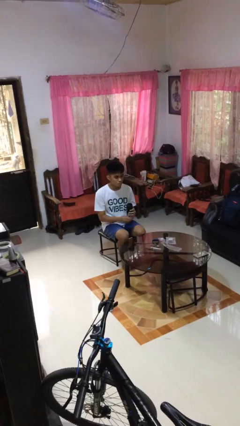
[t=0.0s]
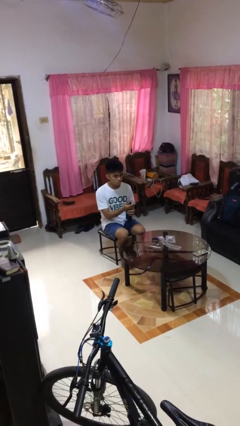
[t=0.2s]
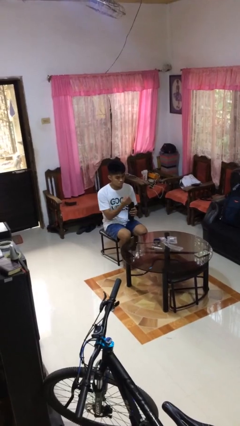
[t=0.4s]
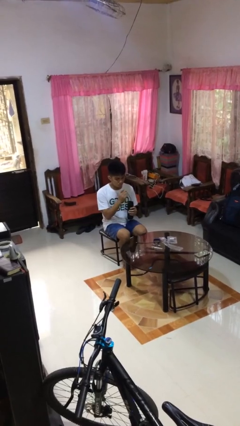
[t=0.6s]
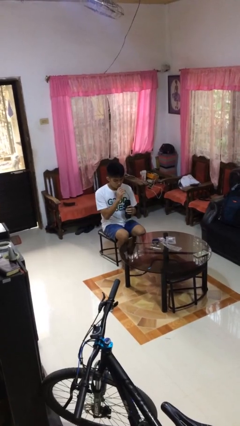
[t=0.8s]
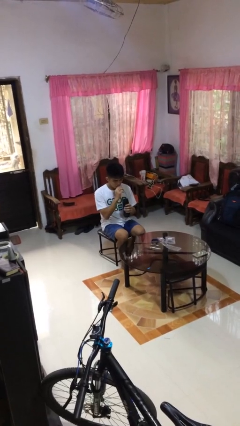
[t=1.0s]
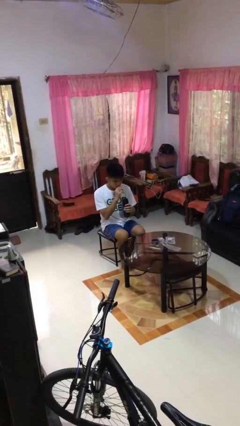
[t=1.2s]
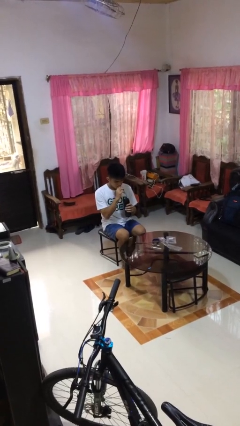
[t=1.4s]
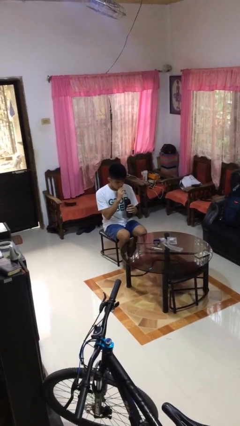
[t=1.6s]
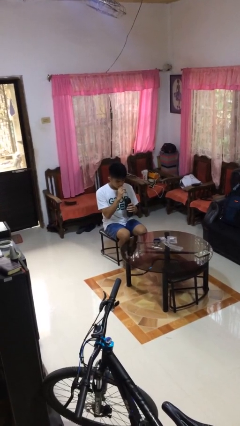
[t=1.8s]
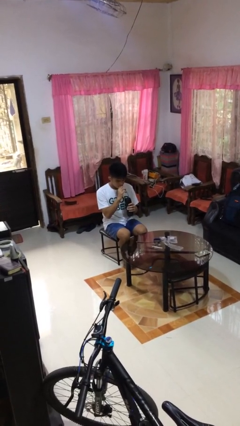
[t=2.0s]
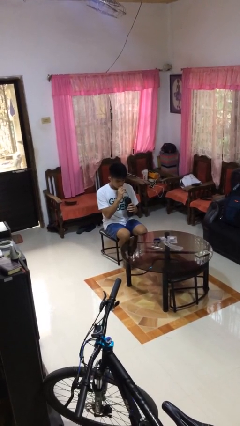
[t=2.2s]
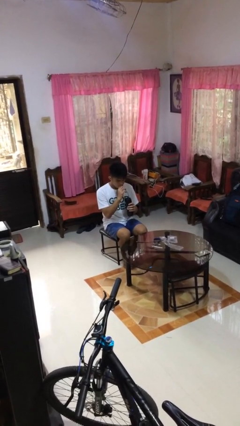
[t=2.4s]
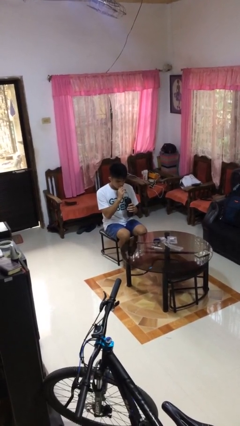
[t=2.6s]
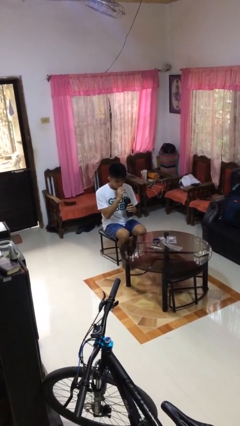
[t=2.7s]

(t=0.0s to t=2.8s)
person drinks from straw

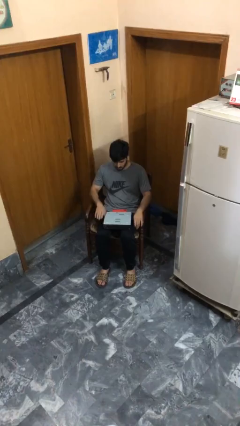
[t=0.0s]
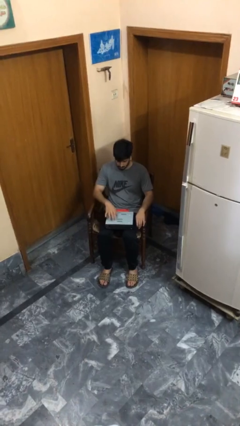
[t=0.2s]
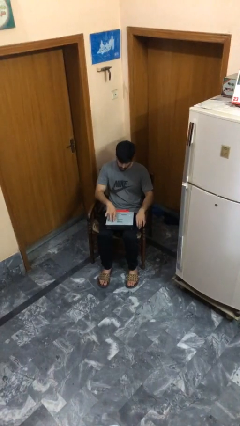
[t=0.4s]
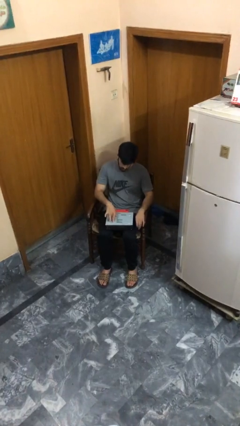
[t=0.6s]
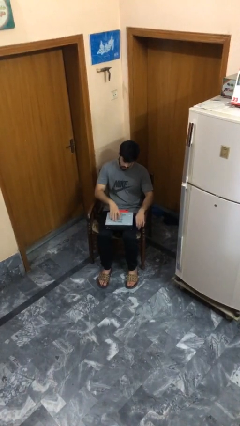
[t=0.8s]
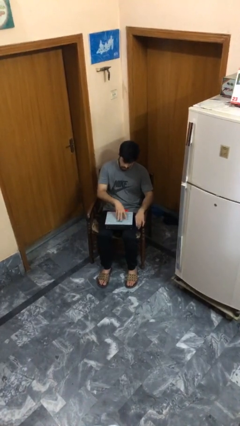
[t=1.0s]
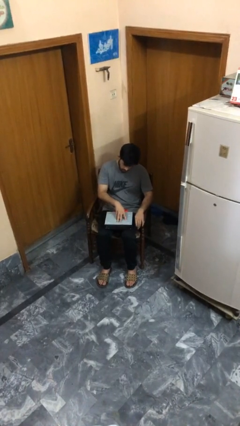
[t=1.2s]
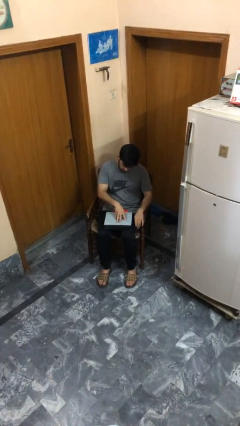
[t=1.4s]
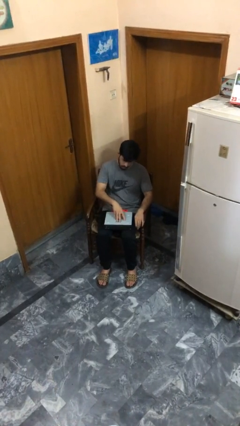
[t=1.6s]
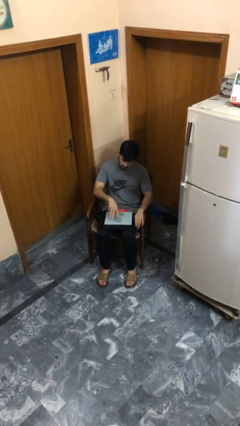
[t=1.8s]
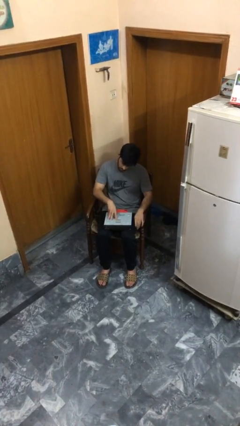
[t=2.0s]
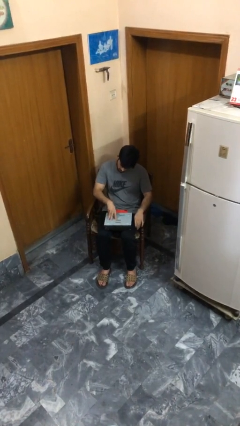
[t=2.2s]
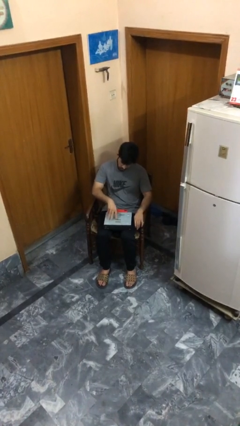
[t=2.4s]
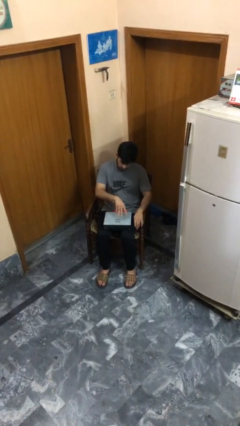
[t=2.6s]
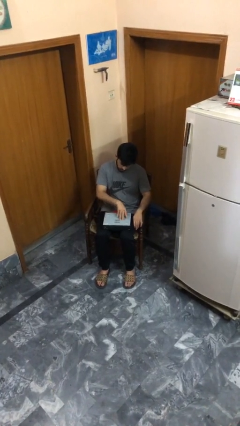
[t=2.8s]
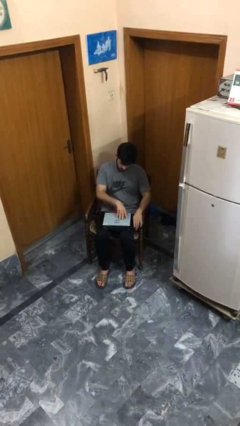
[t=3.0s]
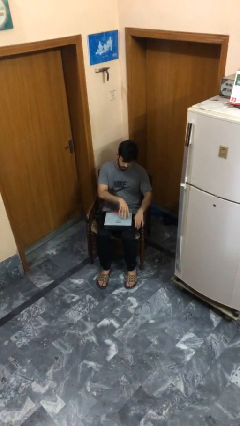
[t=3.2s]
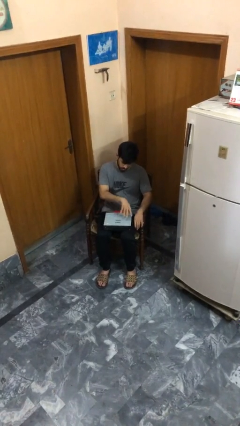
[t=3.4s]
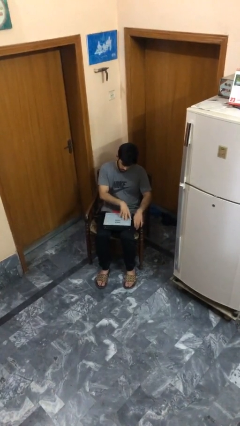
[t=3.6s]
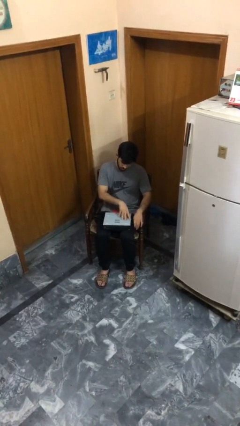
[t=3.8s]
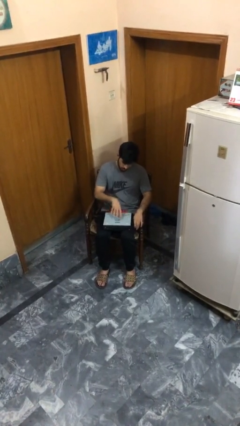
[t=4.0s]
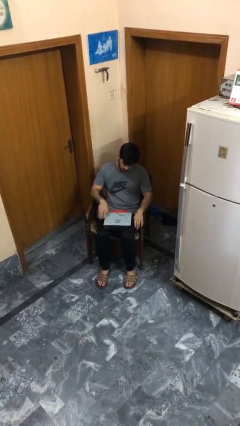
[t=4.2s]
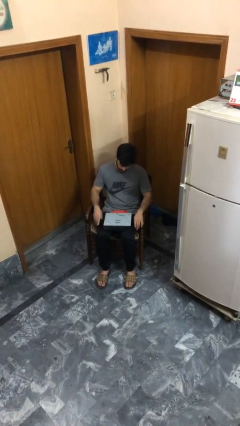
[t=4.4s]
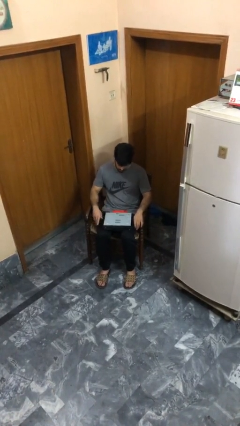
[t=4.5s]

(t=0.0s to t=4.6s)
person taps object with finger

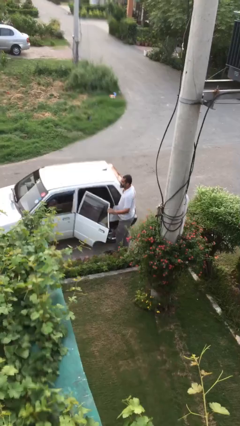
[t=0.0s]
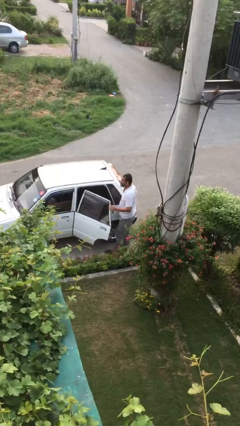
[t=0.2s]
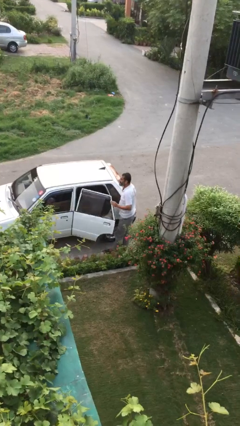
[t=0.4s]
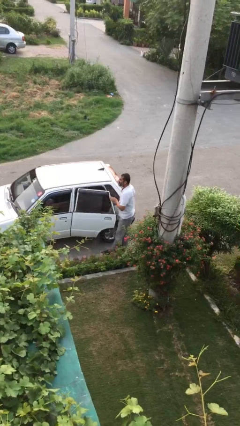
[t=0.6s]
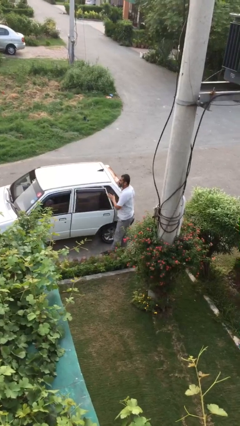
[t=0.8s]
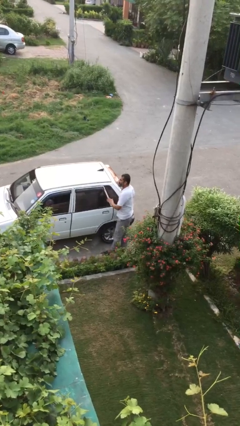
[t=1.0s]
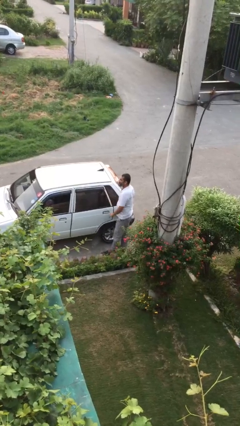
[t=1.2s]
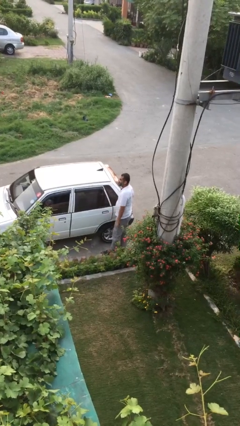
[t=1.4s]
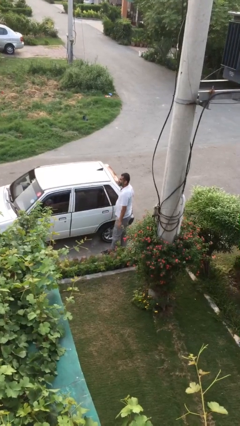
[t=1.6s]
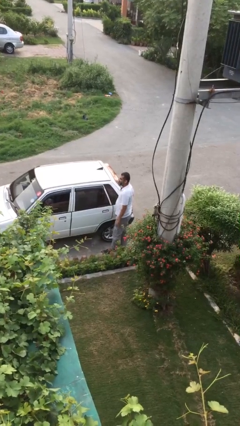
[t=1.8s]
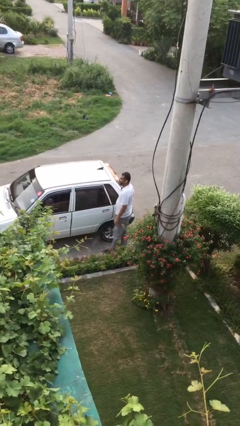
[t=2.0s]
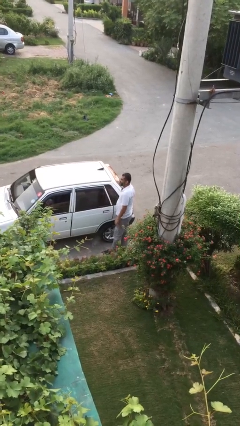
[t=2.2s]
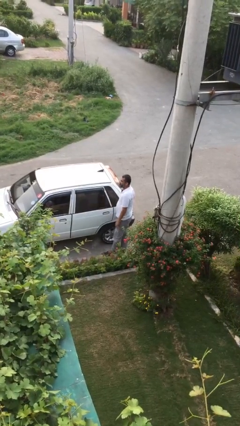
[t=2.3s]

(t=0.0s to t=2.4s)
person closes car door

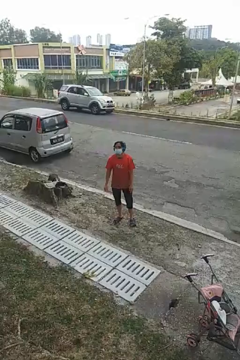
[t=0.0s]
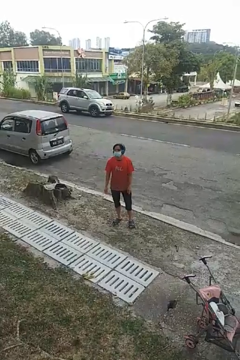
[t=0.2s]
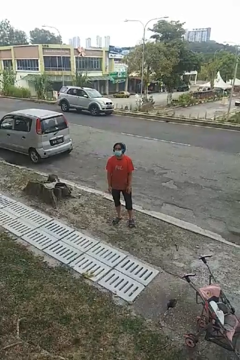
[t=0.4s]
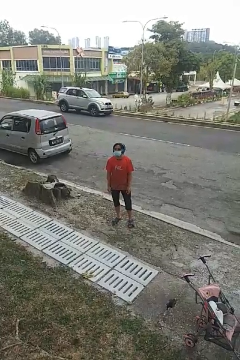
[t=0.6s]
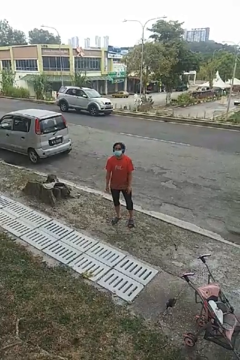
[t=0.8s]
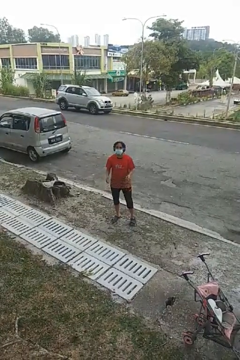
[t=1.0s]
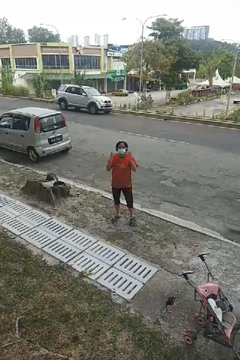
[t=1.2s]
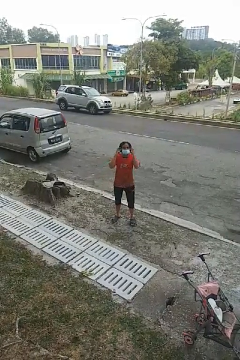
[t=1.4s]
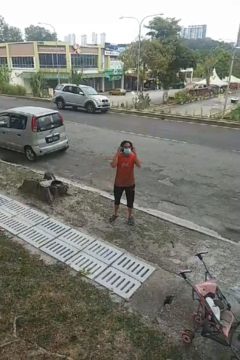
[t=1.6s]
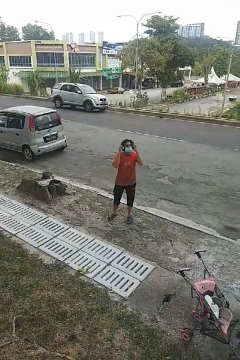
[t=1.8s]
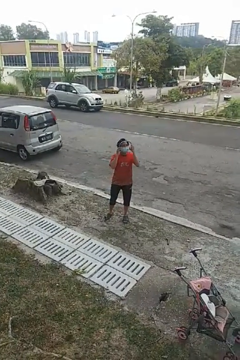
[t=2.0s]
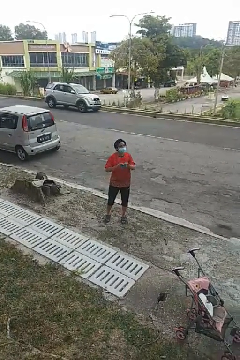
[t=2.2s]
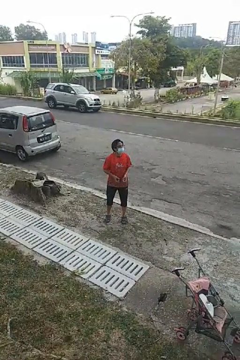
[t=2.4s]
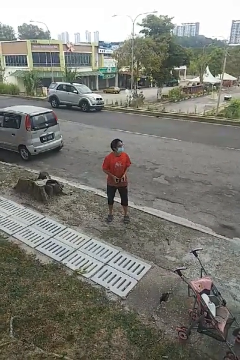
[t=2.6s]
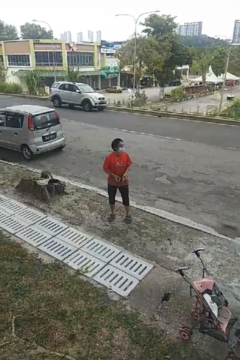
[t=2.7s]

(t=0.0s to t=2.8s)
person takes off headphones

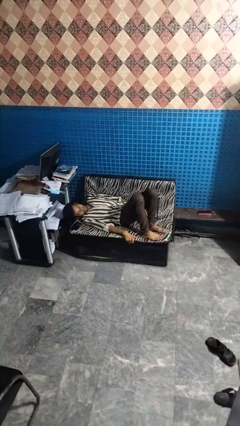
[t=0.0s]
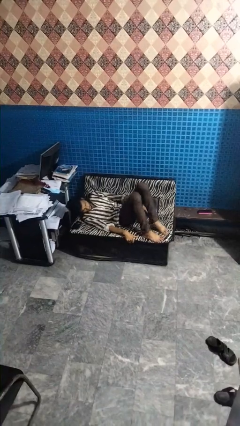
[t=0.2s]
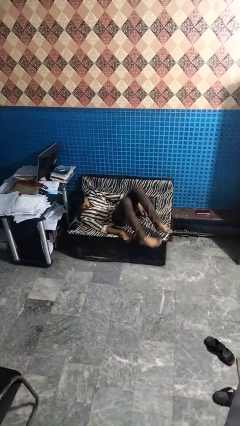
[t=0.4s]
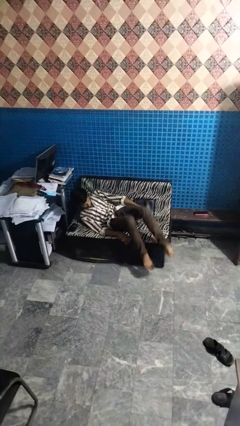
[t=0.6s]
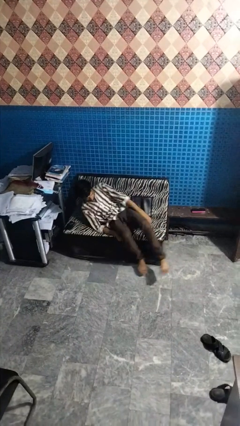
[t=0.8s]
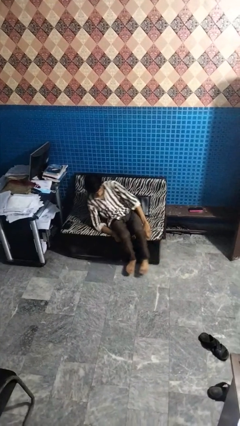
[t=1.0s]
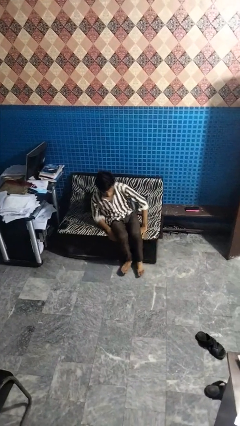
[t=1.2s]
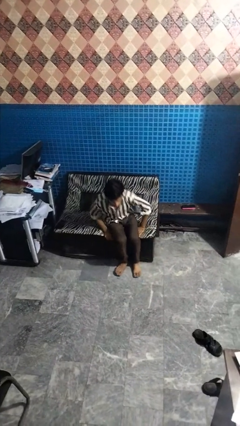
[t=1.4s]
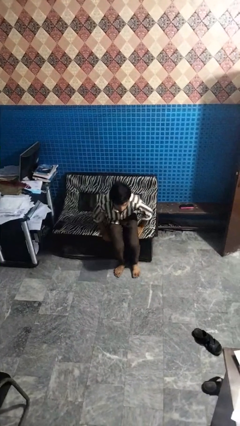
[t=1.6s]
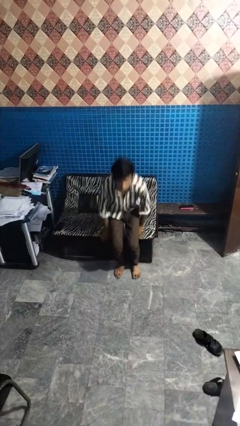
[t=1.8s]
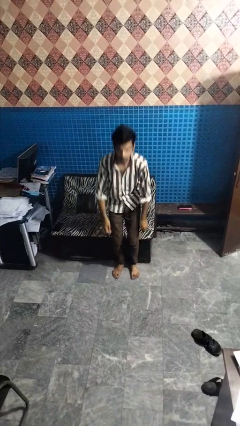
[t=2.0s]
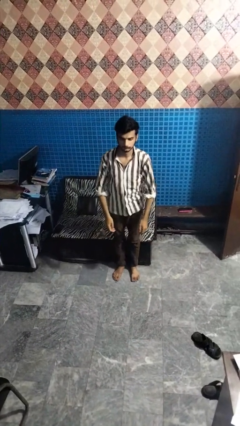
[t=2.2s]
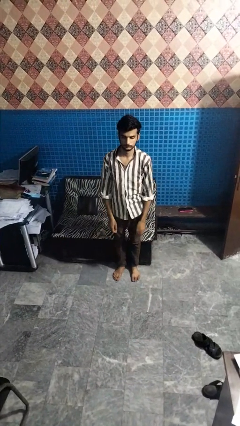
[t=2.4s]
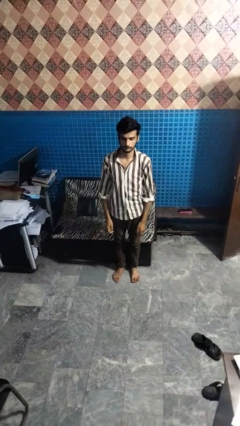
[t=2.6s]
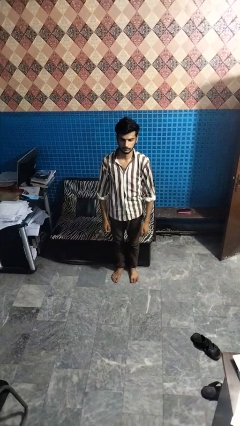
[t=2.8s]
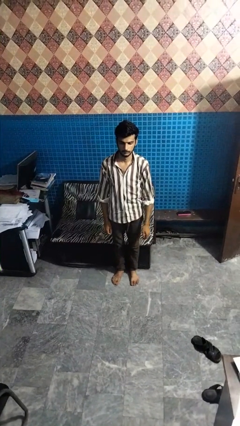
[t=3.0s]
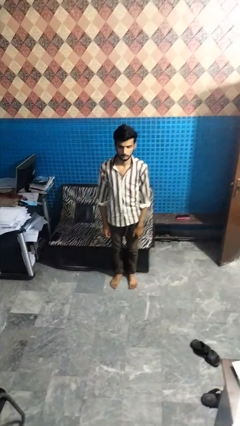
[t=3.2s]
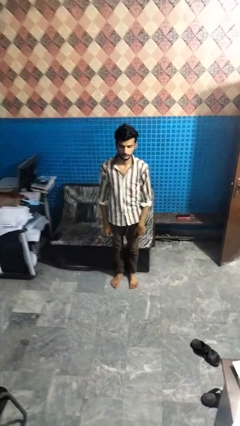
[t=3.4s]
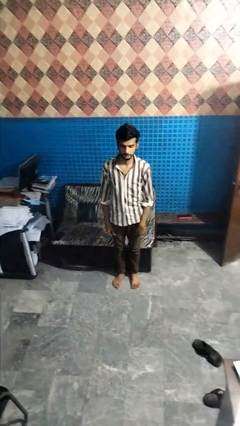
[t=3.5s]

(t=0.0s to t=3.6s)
person stands up

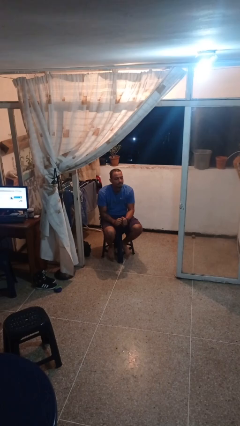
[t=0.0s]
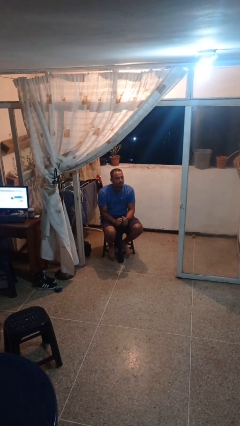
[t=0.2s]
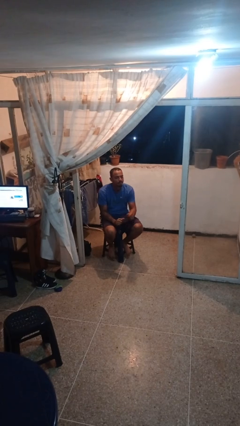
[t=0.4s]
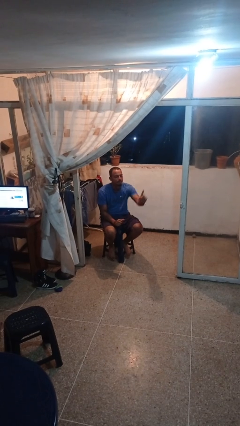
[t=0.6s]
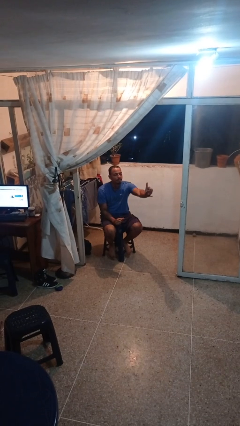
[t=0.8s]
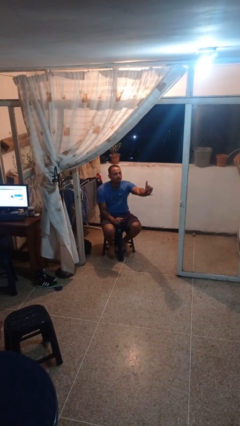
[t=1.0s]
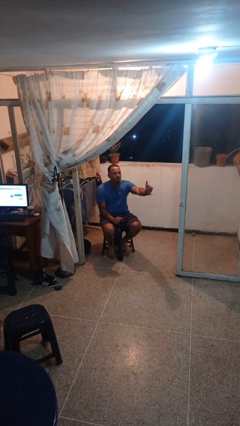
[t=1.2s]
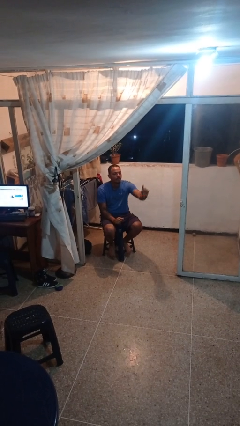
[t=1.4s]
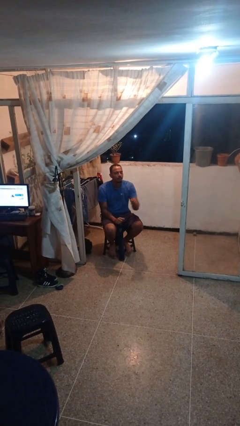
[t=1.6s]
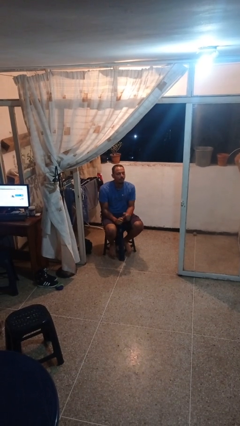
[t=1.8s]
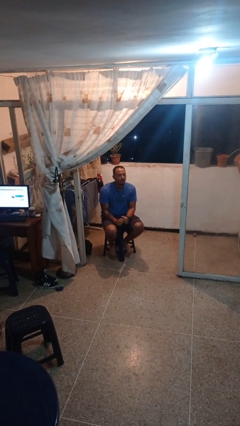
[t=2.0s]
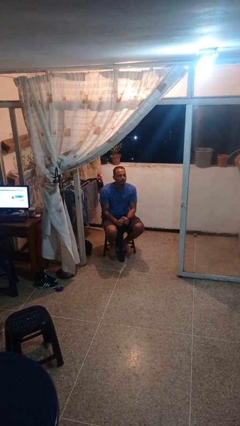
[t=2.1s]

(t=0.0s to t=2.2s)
person gestures number one
